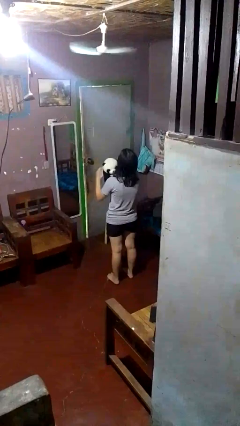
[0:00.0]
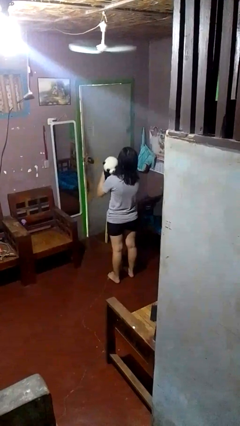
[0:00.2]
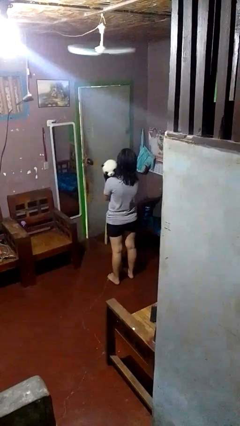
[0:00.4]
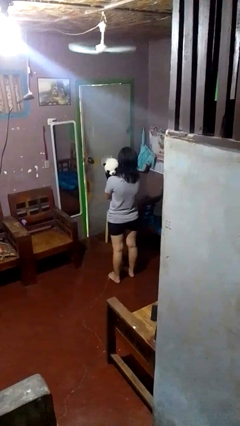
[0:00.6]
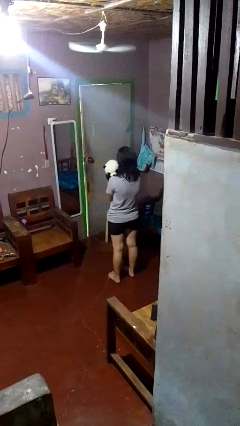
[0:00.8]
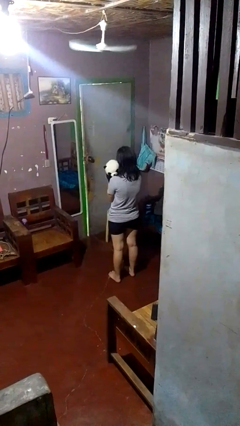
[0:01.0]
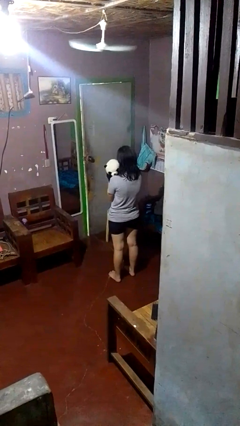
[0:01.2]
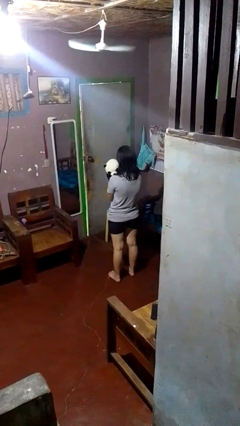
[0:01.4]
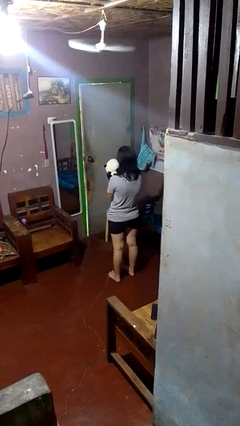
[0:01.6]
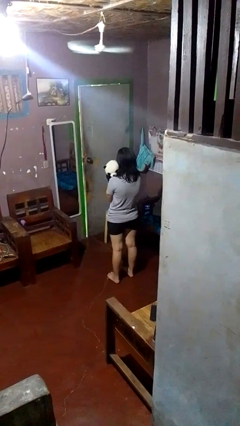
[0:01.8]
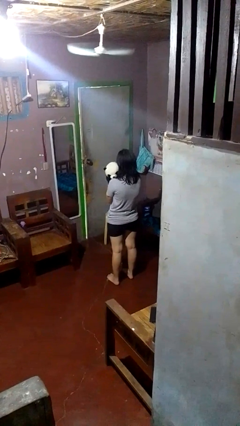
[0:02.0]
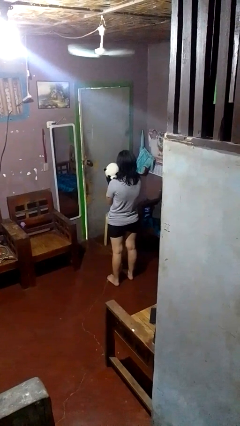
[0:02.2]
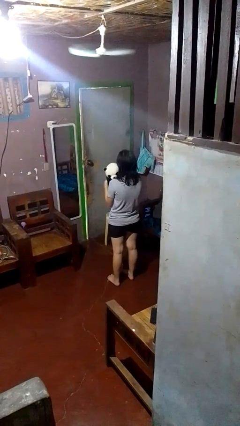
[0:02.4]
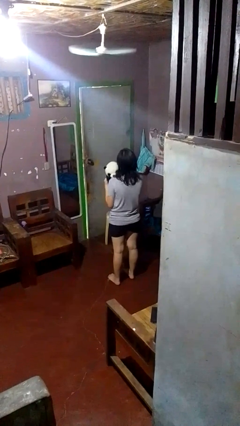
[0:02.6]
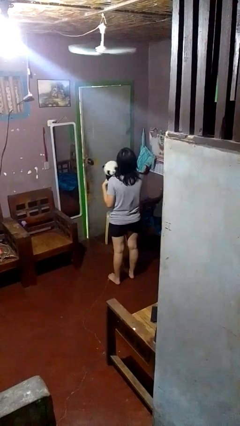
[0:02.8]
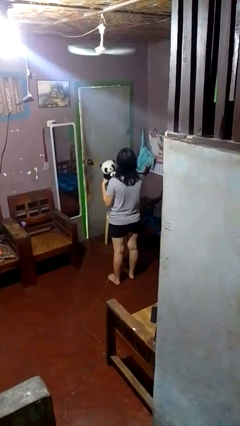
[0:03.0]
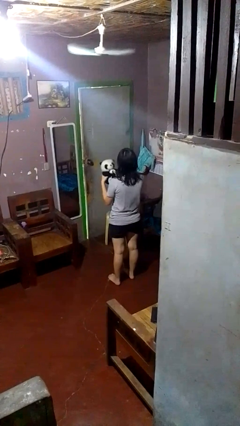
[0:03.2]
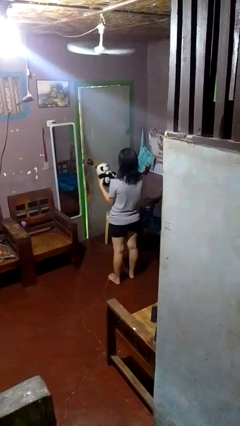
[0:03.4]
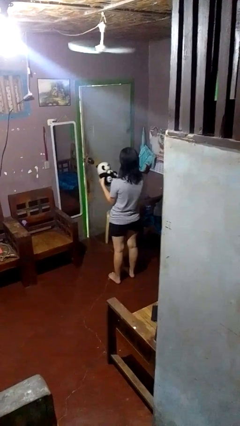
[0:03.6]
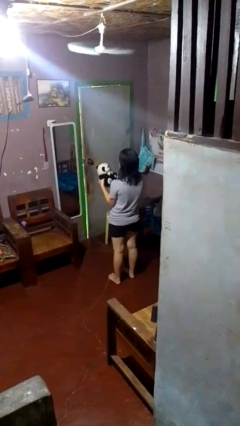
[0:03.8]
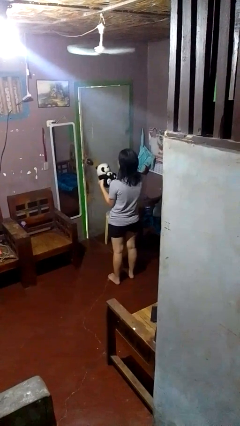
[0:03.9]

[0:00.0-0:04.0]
person hugs stuffed animal

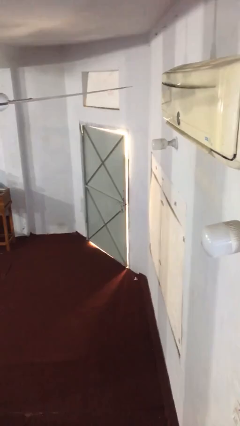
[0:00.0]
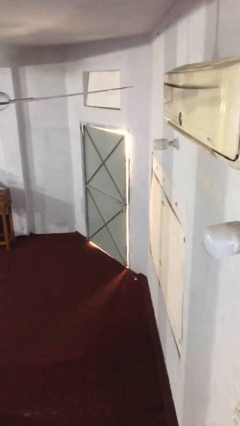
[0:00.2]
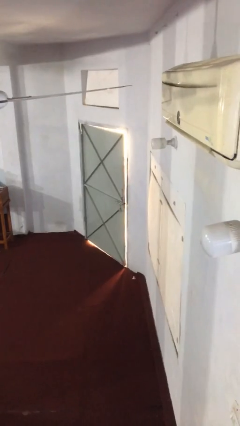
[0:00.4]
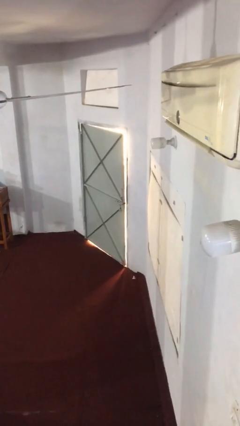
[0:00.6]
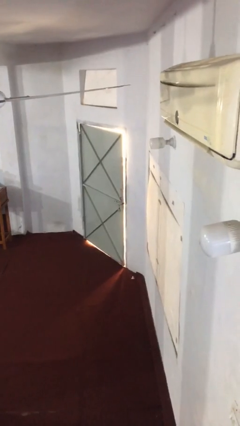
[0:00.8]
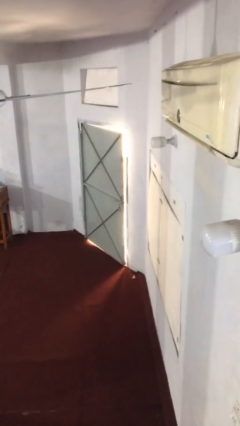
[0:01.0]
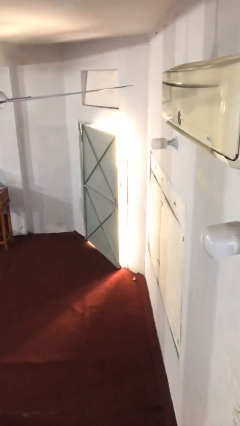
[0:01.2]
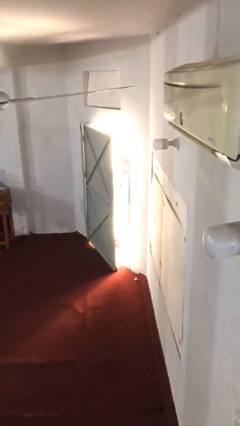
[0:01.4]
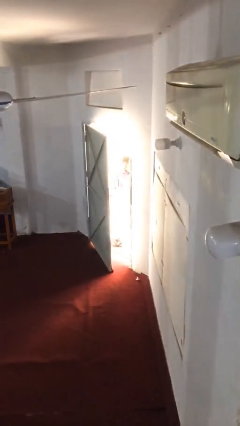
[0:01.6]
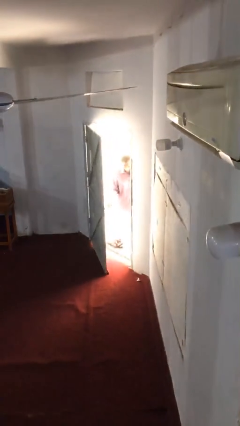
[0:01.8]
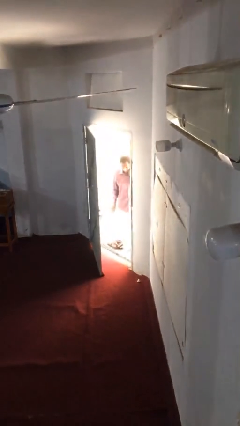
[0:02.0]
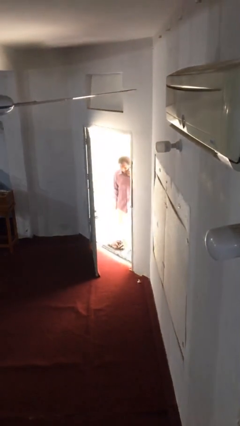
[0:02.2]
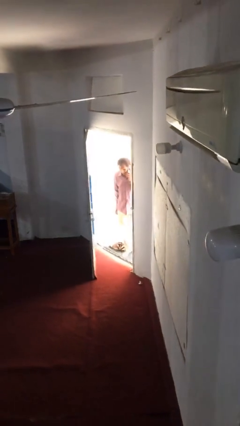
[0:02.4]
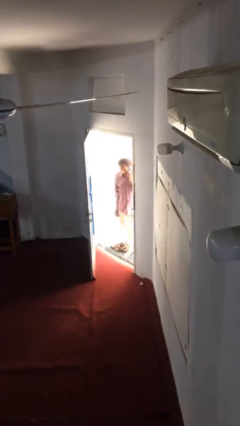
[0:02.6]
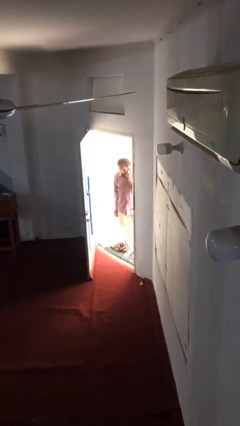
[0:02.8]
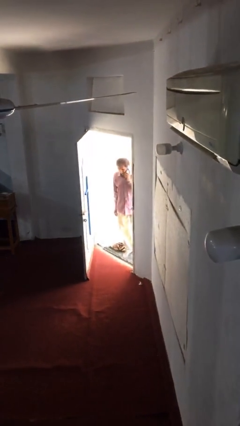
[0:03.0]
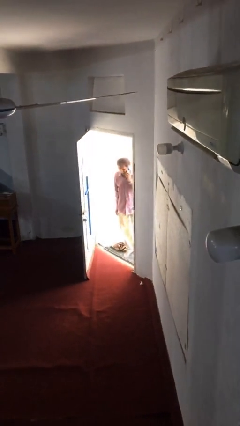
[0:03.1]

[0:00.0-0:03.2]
person opens facility door

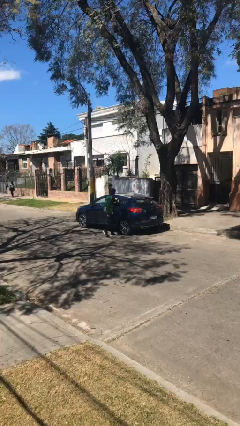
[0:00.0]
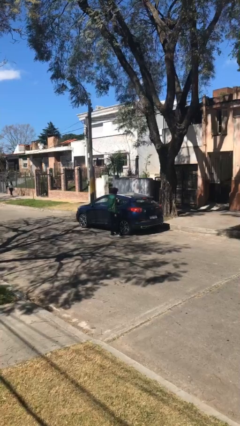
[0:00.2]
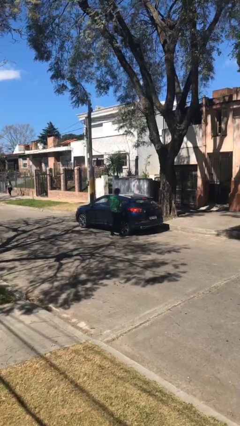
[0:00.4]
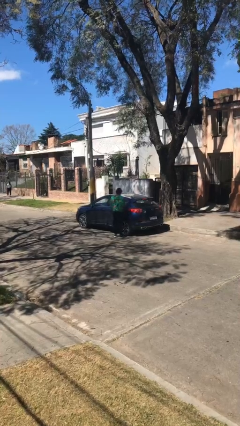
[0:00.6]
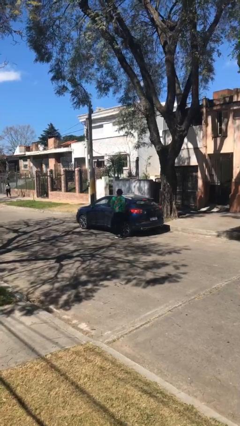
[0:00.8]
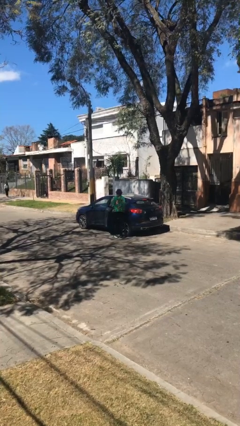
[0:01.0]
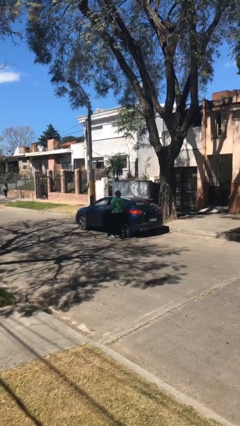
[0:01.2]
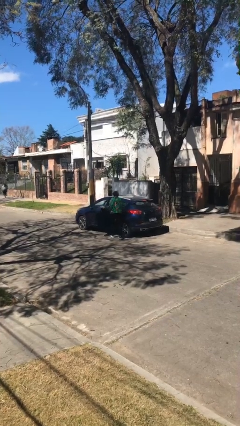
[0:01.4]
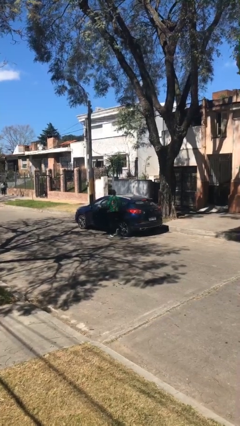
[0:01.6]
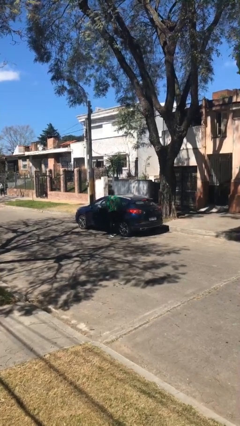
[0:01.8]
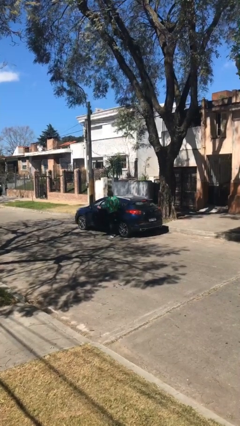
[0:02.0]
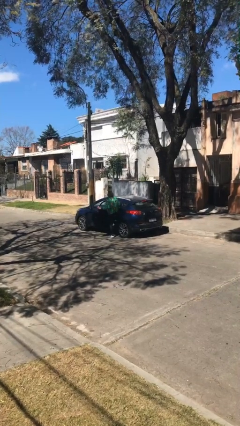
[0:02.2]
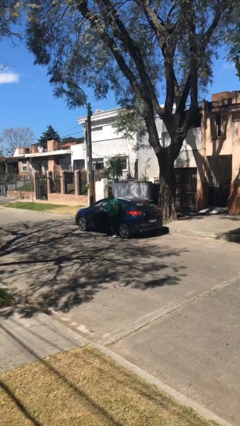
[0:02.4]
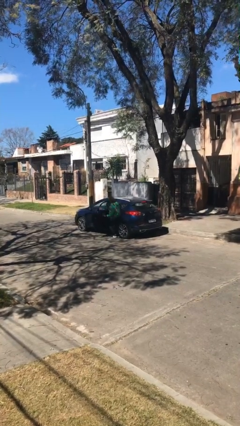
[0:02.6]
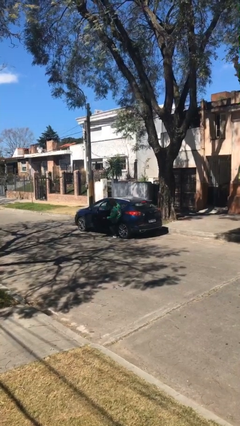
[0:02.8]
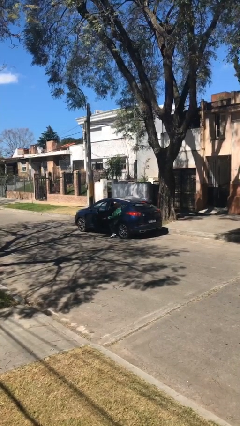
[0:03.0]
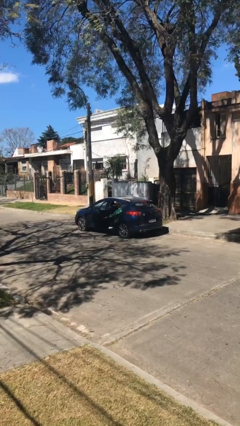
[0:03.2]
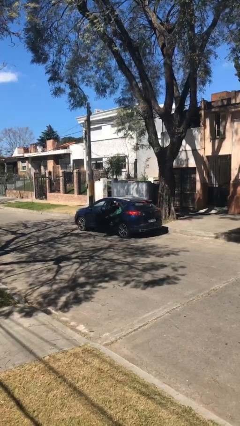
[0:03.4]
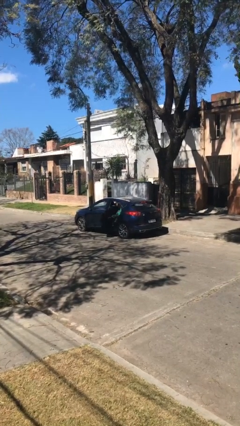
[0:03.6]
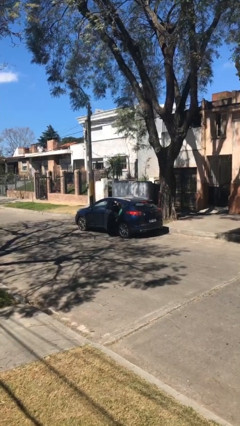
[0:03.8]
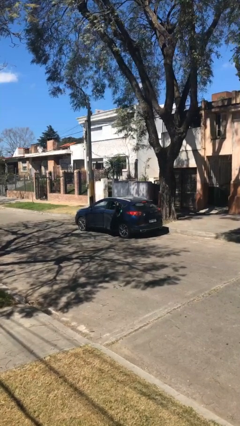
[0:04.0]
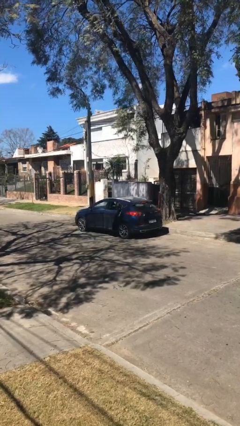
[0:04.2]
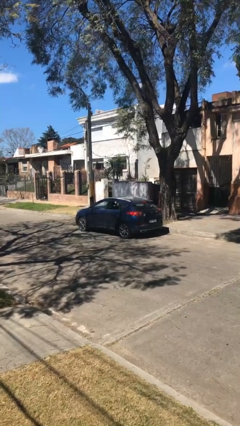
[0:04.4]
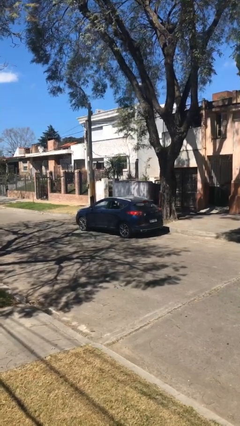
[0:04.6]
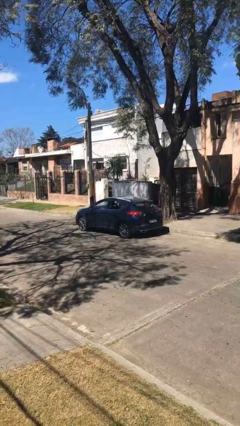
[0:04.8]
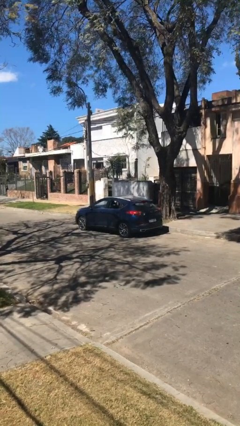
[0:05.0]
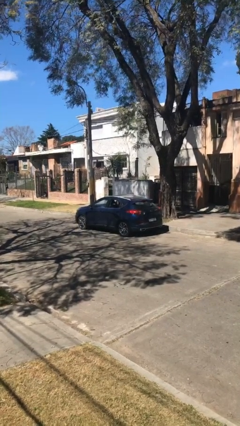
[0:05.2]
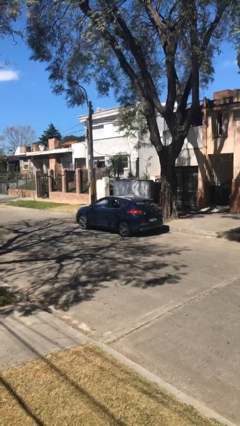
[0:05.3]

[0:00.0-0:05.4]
car picks up person

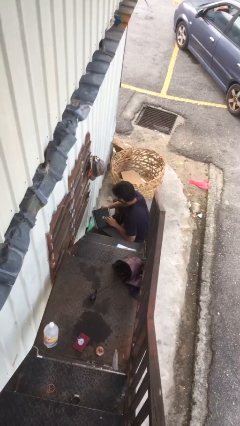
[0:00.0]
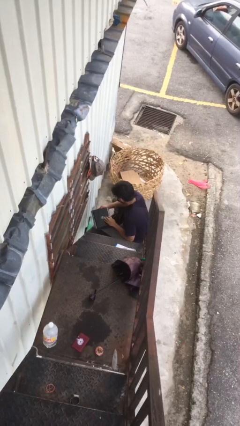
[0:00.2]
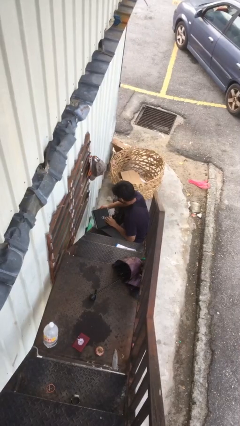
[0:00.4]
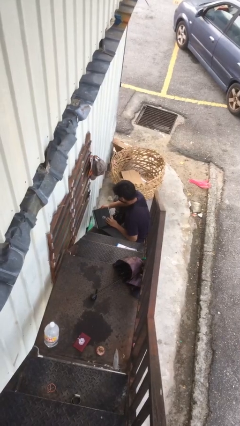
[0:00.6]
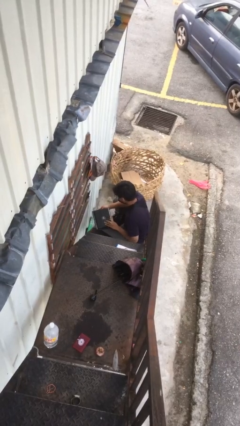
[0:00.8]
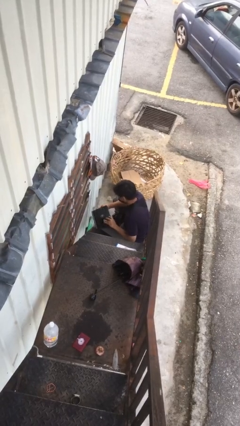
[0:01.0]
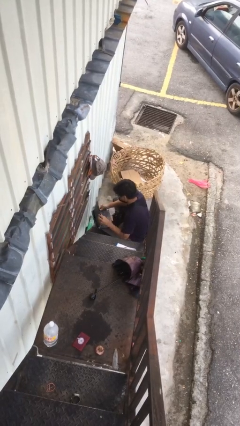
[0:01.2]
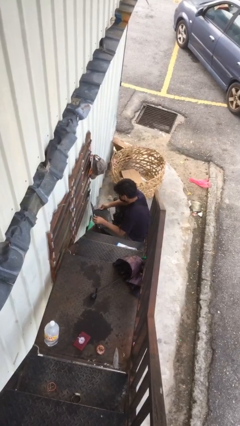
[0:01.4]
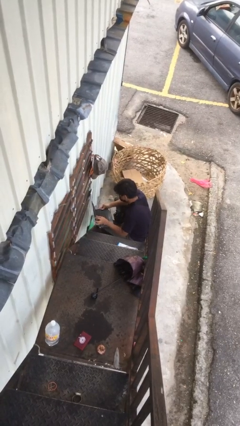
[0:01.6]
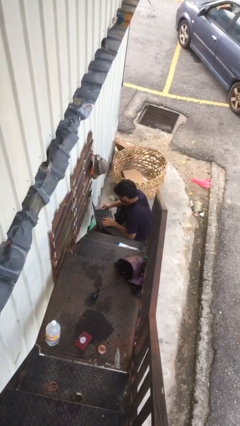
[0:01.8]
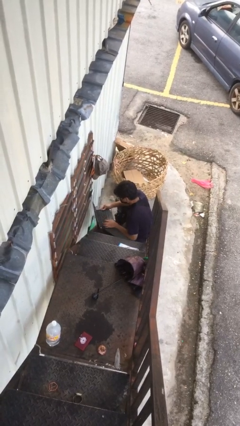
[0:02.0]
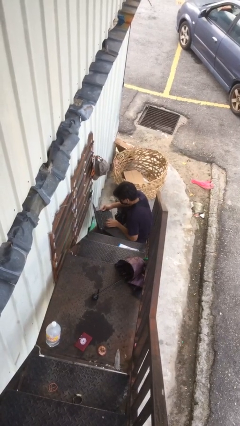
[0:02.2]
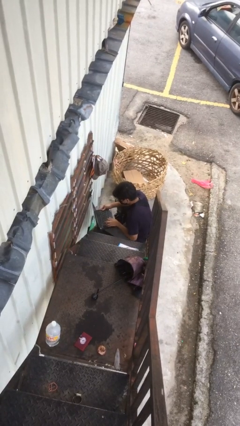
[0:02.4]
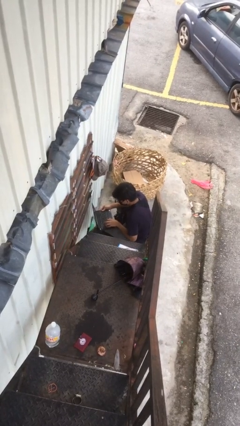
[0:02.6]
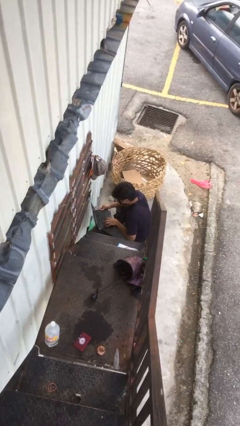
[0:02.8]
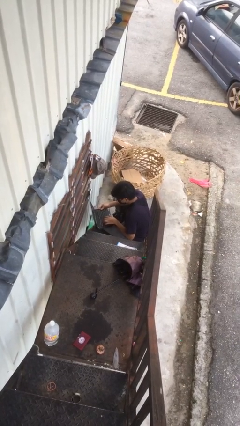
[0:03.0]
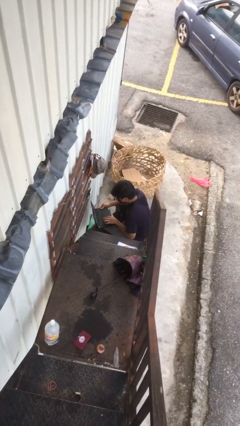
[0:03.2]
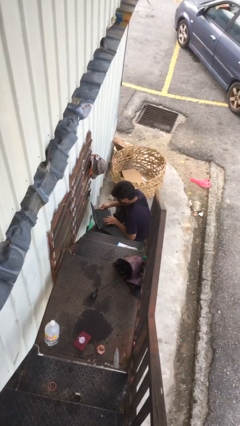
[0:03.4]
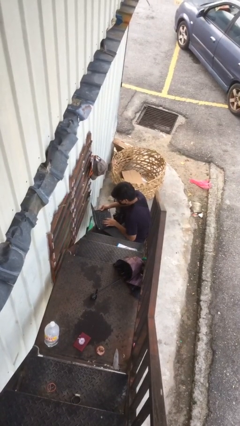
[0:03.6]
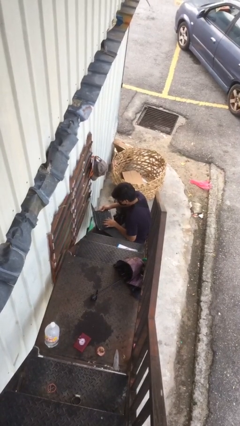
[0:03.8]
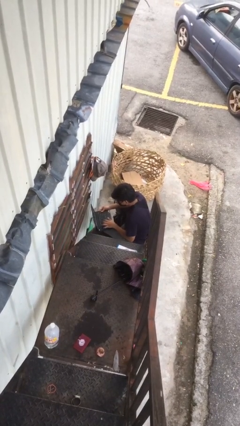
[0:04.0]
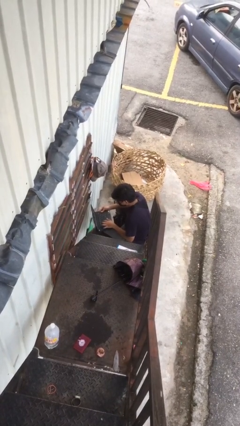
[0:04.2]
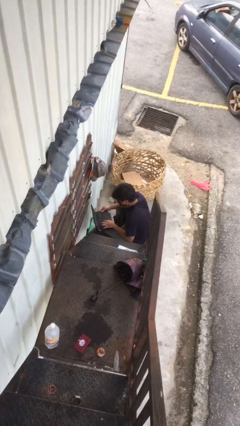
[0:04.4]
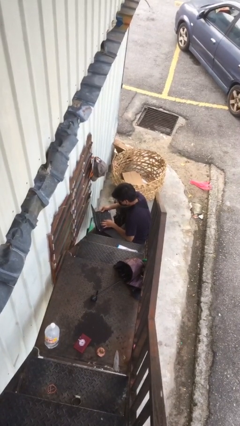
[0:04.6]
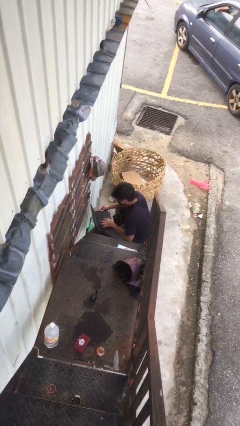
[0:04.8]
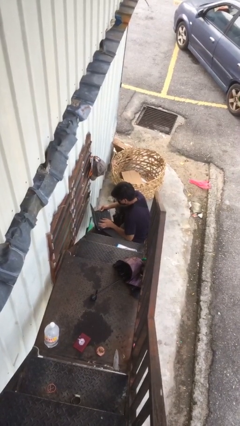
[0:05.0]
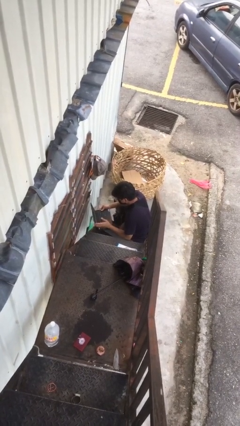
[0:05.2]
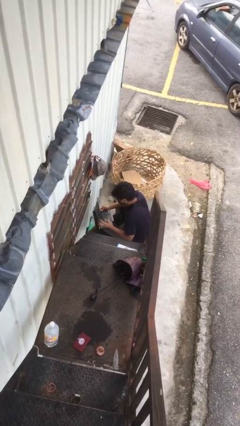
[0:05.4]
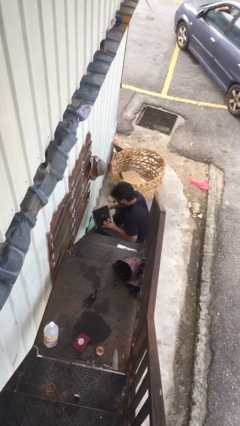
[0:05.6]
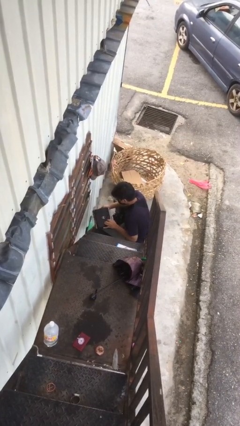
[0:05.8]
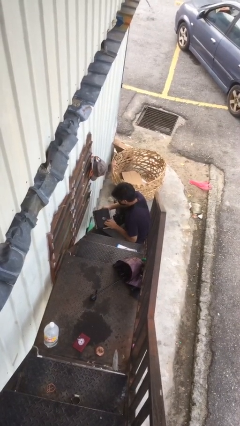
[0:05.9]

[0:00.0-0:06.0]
person interacts with laptop
